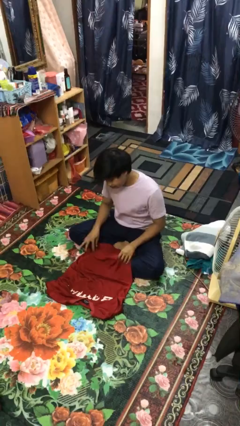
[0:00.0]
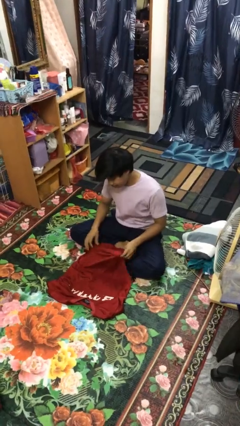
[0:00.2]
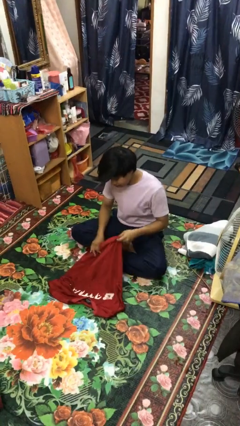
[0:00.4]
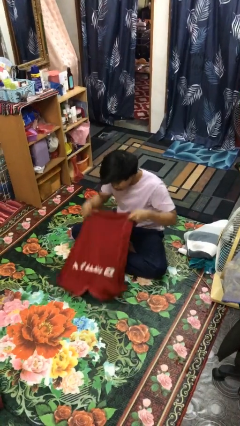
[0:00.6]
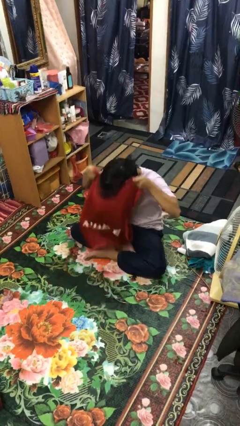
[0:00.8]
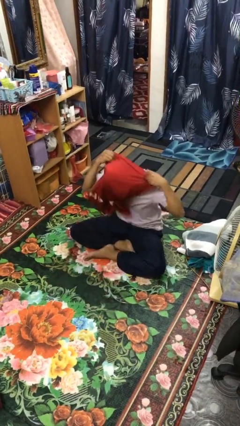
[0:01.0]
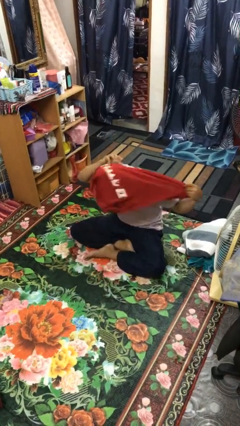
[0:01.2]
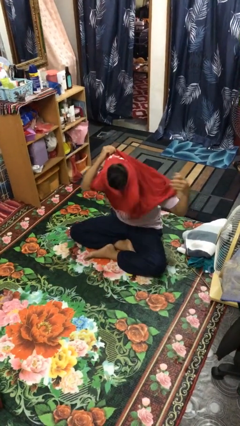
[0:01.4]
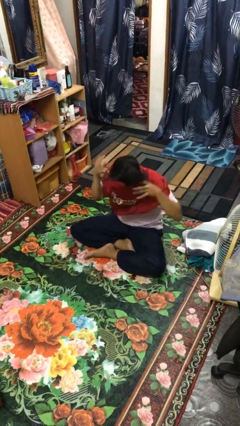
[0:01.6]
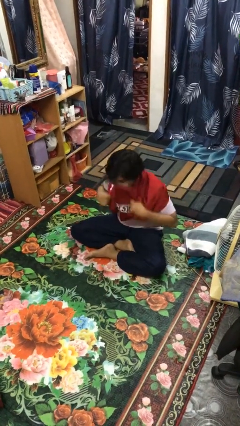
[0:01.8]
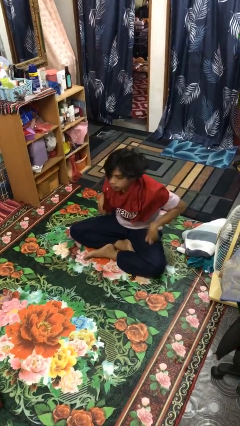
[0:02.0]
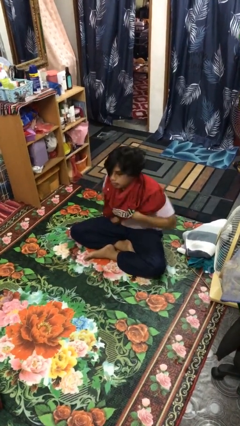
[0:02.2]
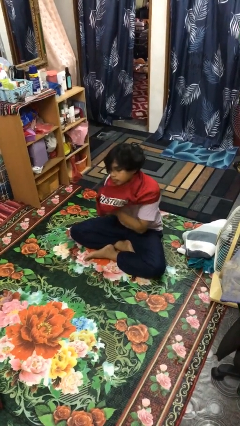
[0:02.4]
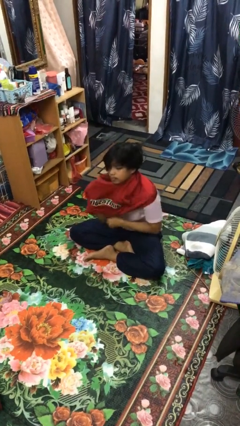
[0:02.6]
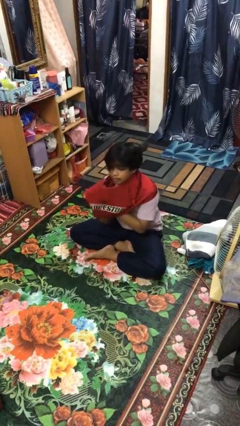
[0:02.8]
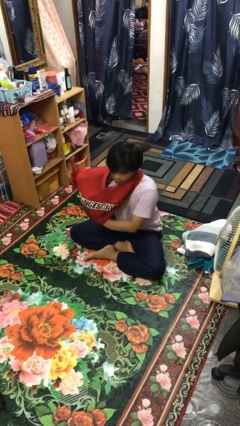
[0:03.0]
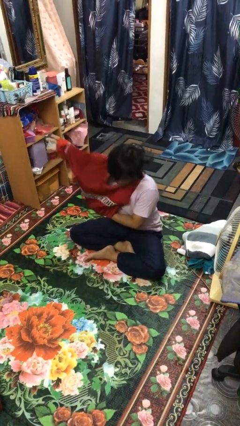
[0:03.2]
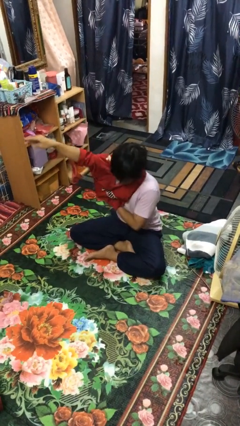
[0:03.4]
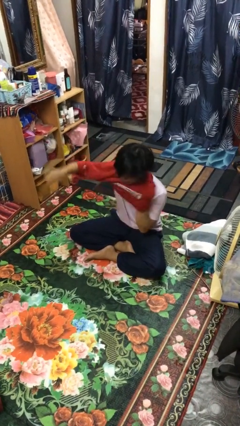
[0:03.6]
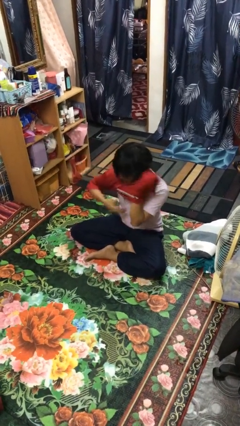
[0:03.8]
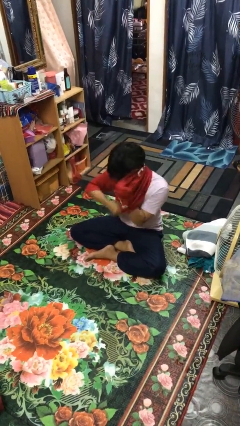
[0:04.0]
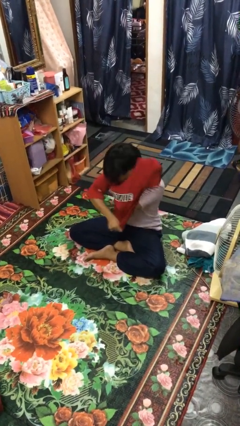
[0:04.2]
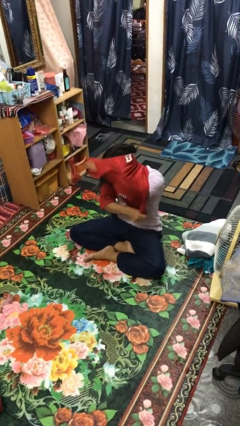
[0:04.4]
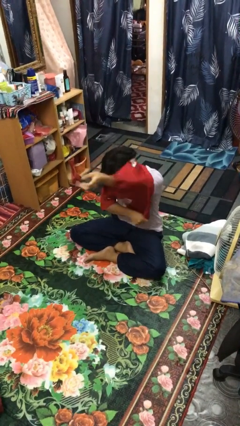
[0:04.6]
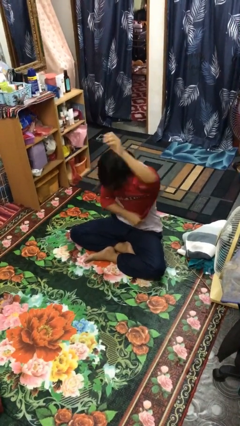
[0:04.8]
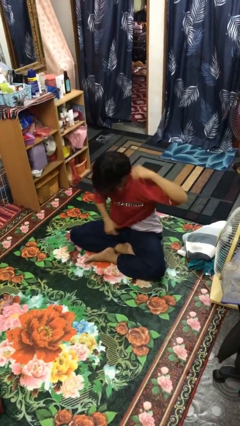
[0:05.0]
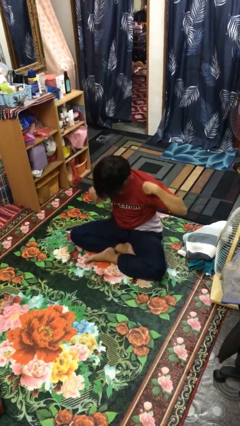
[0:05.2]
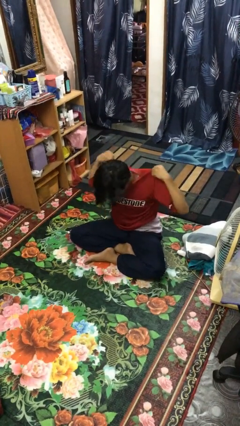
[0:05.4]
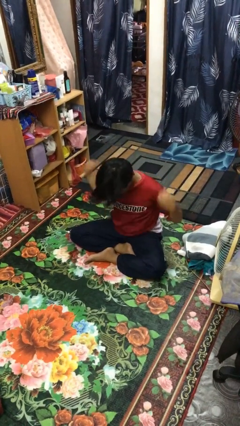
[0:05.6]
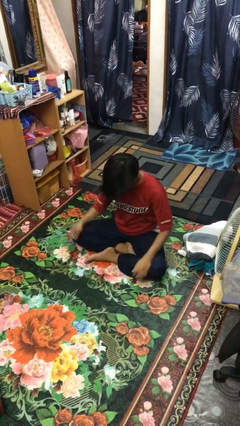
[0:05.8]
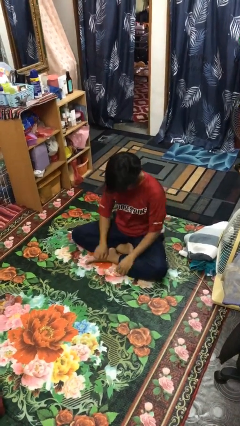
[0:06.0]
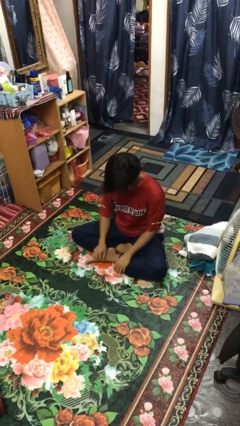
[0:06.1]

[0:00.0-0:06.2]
person puts on shirt

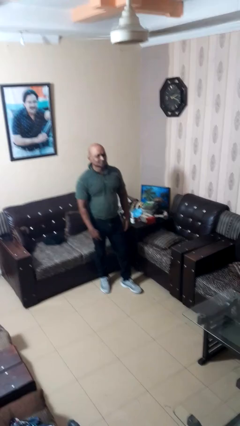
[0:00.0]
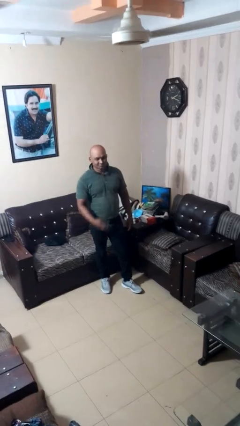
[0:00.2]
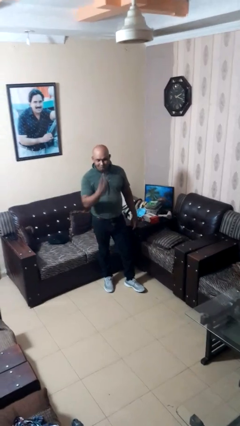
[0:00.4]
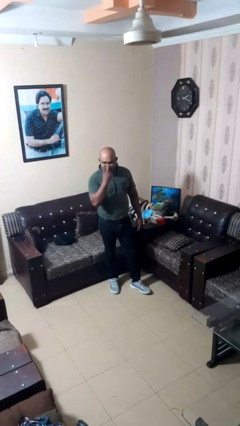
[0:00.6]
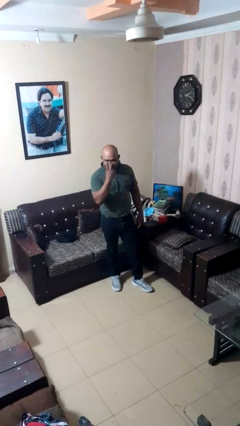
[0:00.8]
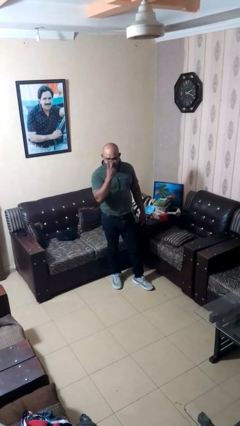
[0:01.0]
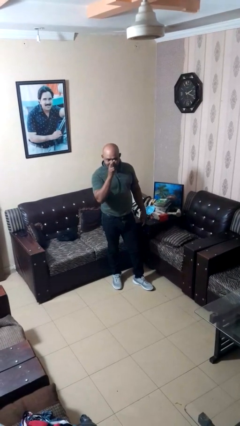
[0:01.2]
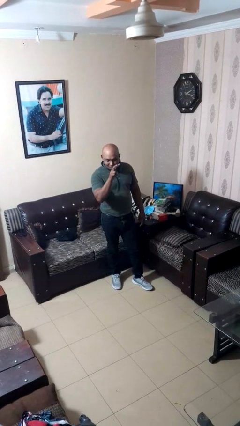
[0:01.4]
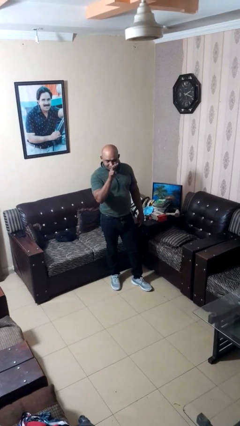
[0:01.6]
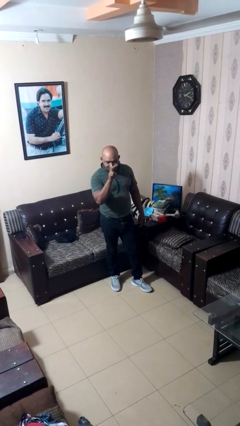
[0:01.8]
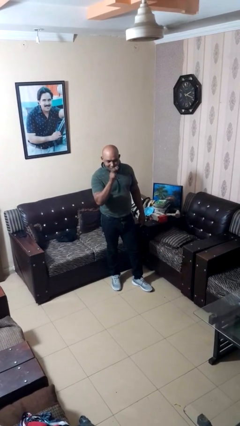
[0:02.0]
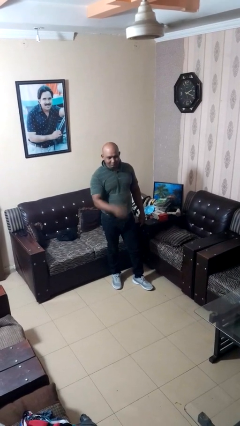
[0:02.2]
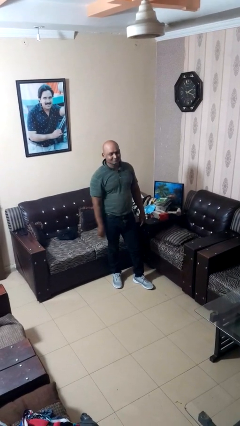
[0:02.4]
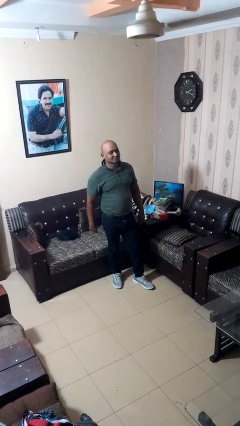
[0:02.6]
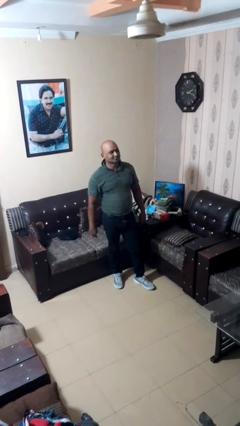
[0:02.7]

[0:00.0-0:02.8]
person gestures watch closely

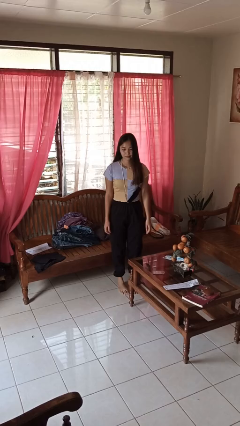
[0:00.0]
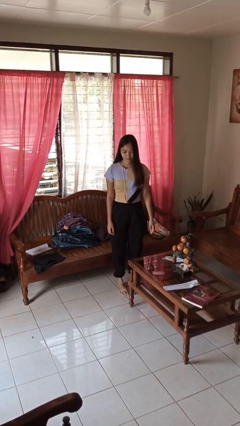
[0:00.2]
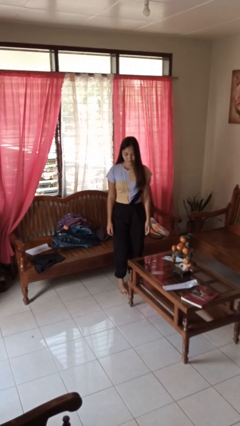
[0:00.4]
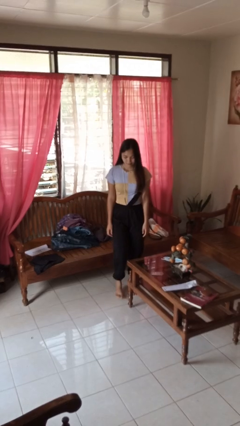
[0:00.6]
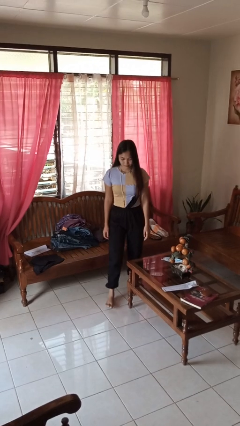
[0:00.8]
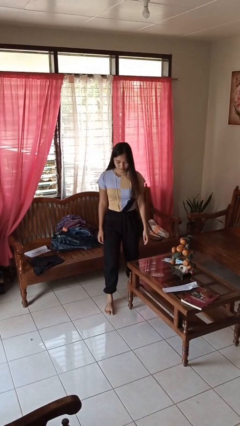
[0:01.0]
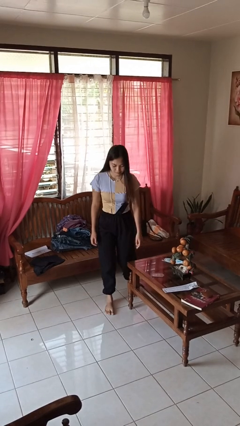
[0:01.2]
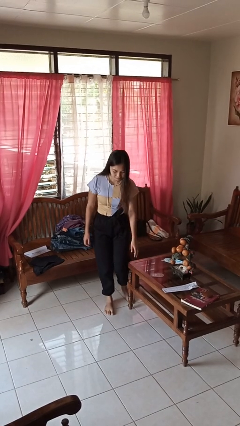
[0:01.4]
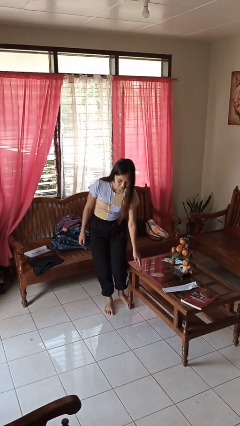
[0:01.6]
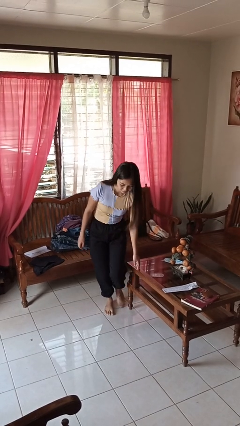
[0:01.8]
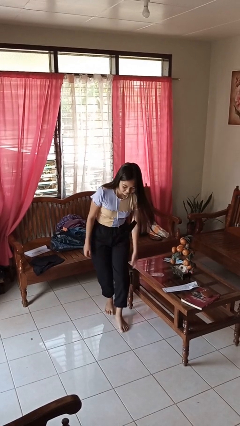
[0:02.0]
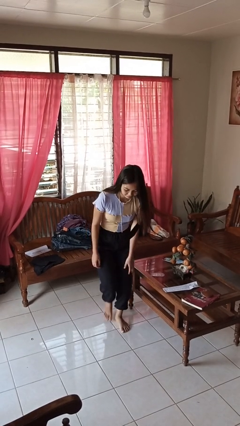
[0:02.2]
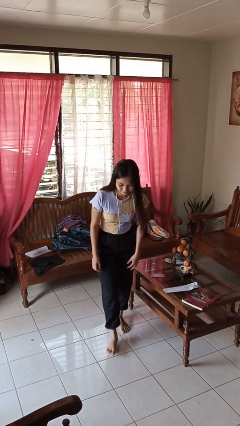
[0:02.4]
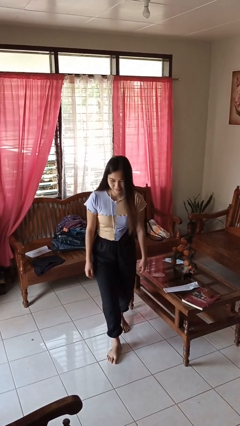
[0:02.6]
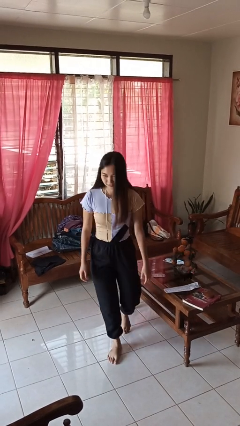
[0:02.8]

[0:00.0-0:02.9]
person bumps into table

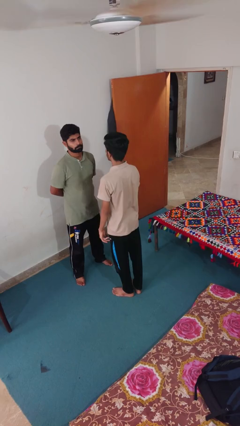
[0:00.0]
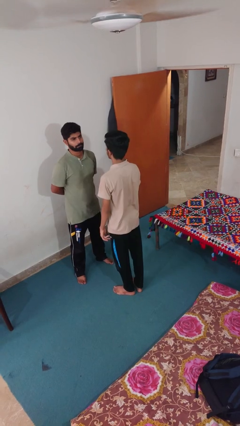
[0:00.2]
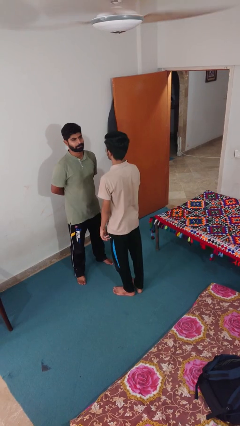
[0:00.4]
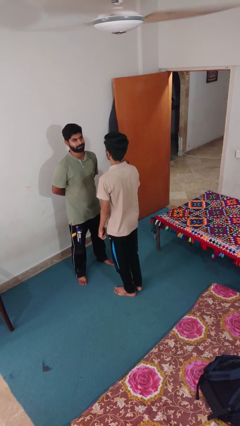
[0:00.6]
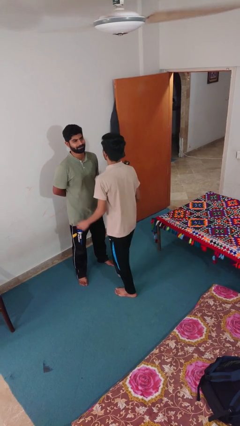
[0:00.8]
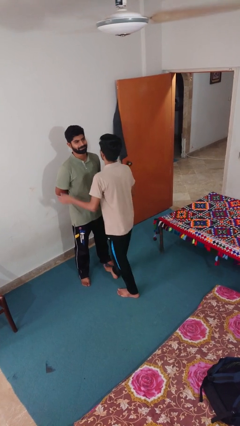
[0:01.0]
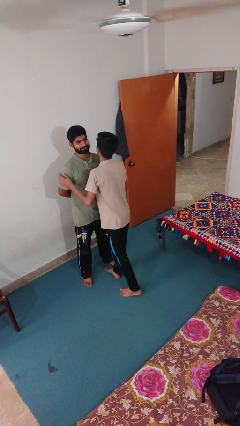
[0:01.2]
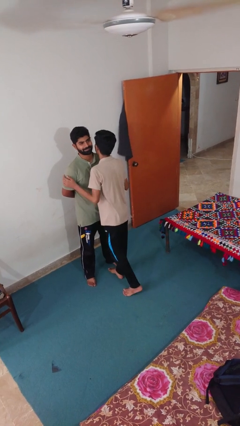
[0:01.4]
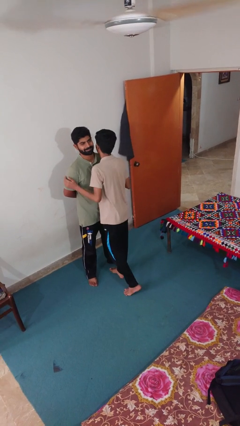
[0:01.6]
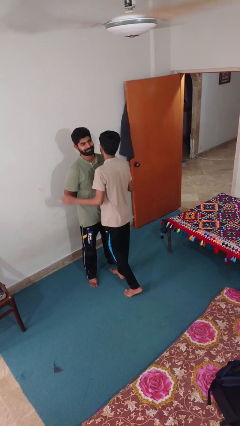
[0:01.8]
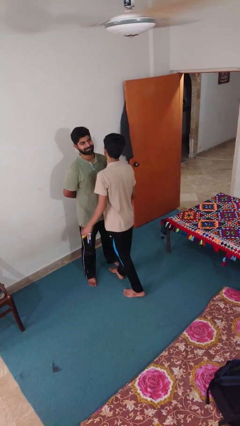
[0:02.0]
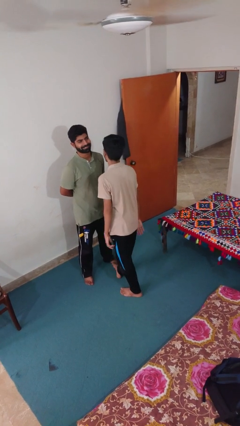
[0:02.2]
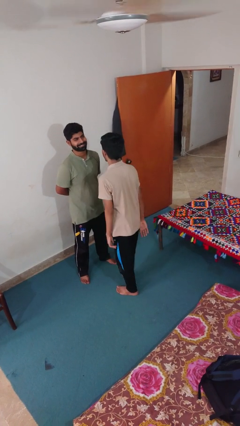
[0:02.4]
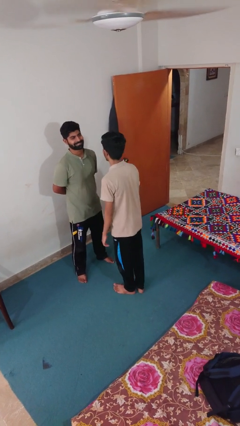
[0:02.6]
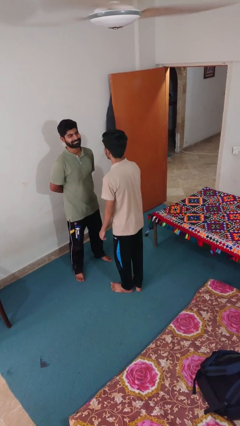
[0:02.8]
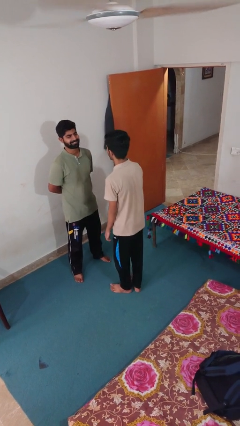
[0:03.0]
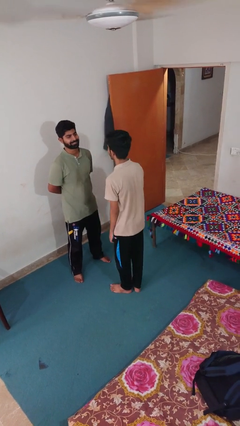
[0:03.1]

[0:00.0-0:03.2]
person kisses cheek of person

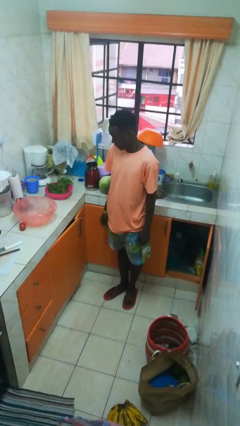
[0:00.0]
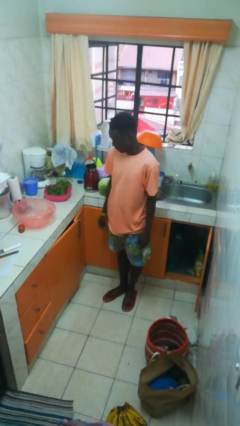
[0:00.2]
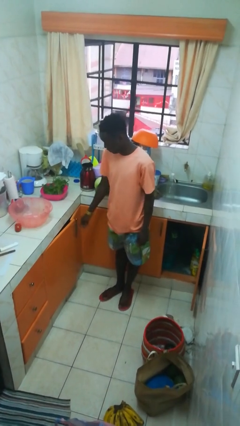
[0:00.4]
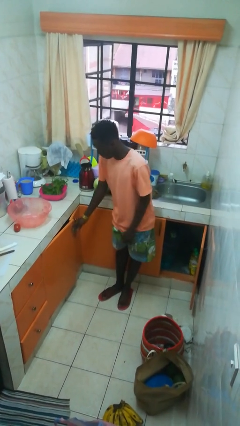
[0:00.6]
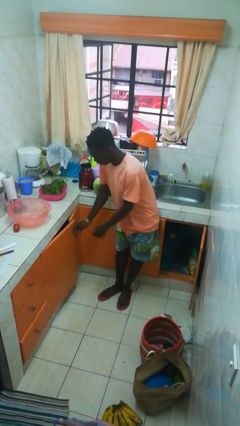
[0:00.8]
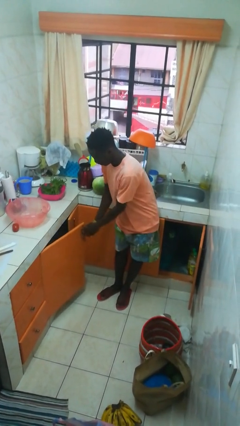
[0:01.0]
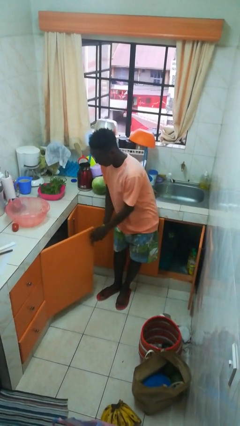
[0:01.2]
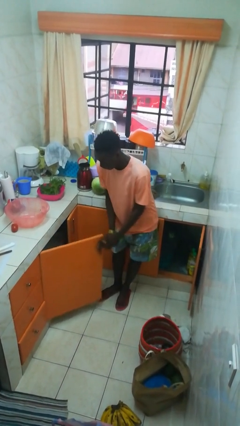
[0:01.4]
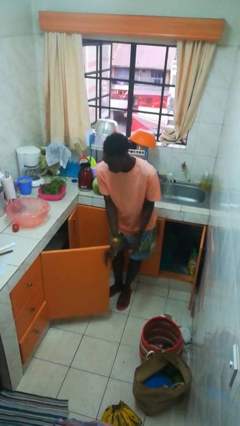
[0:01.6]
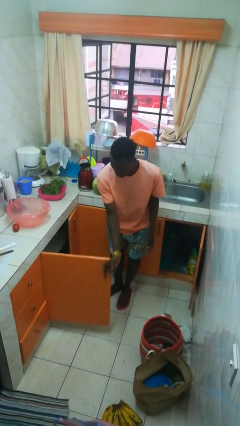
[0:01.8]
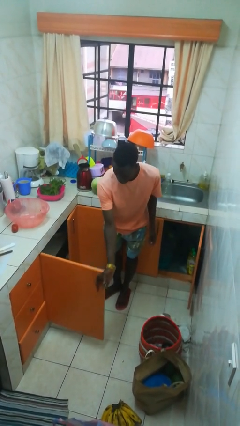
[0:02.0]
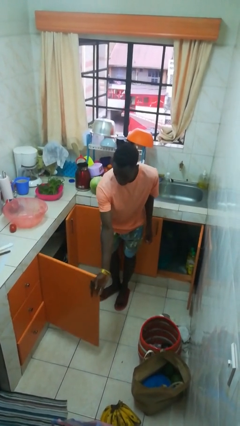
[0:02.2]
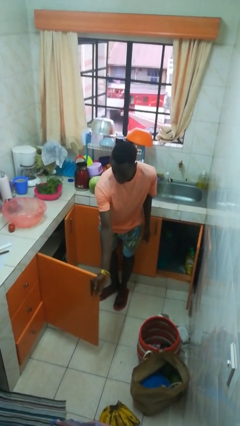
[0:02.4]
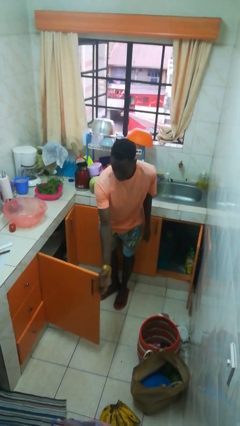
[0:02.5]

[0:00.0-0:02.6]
person opens cabinet
